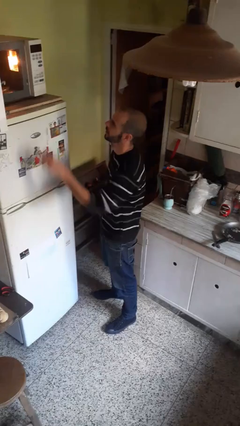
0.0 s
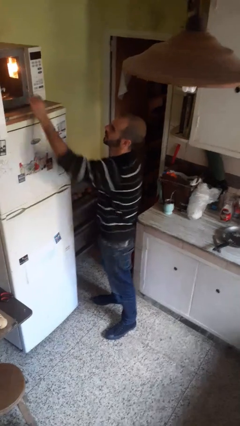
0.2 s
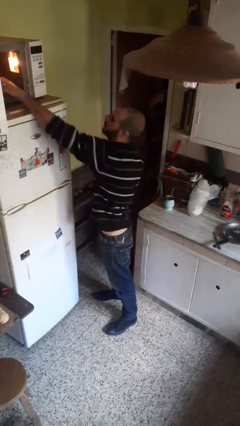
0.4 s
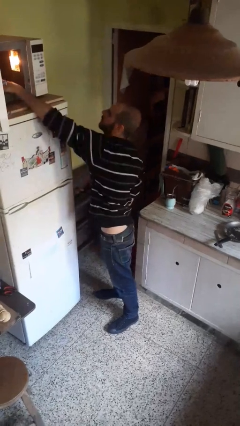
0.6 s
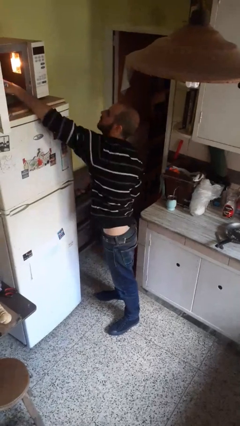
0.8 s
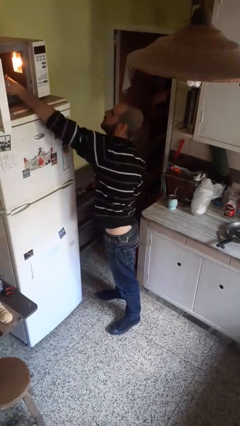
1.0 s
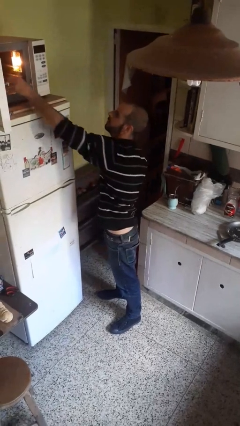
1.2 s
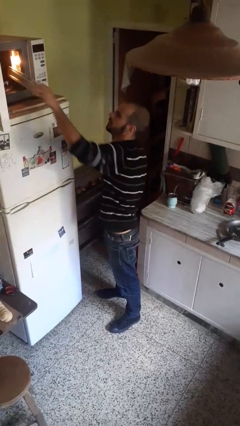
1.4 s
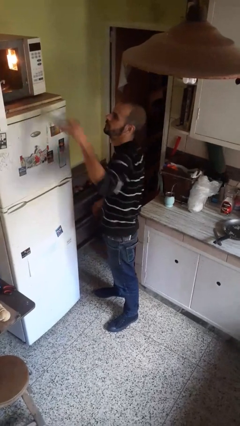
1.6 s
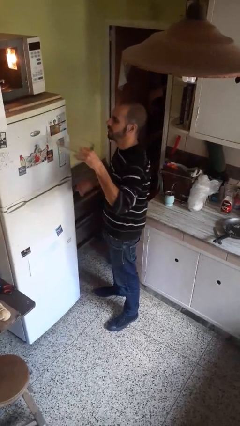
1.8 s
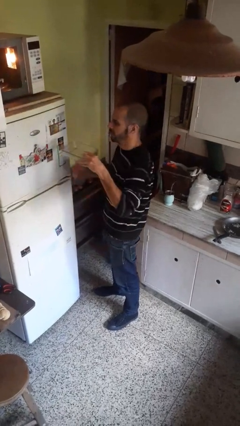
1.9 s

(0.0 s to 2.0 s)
person takes object from microwave

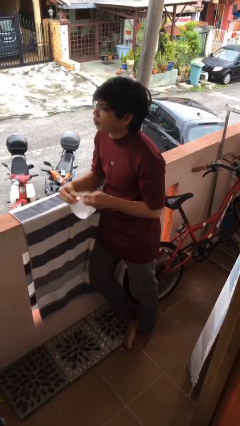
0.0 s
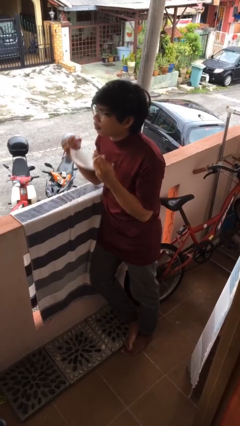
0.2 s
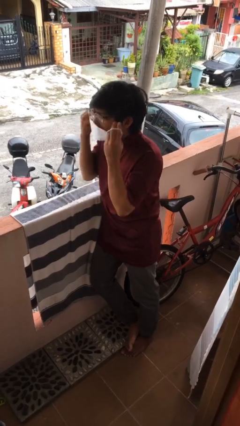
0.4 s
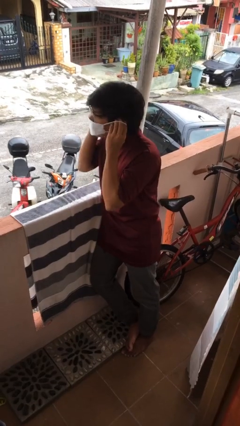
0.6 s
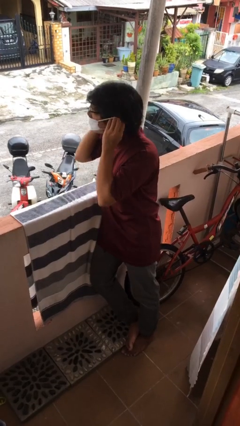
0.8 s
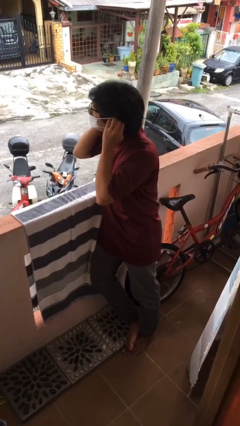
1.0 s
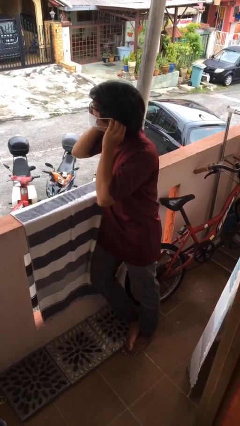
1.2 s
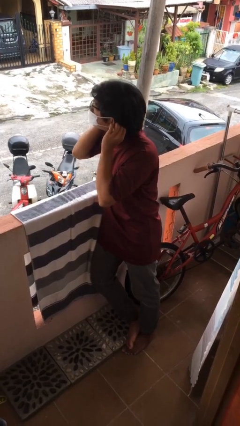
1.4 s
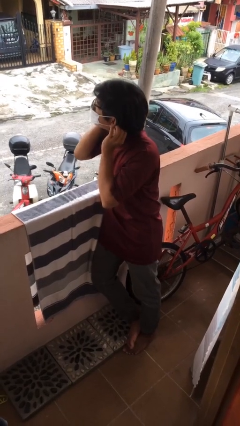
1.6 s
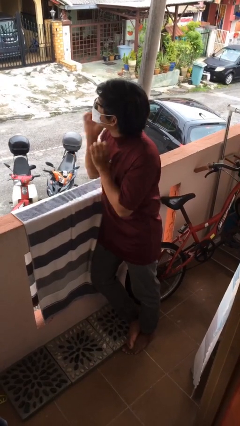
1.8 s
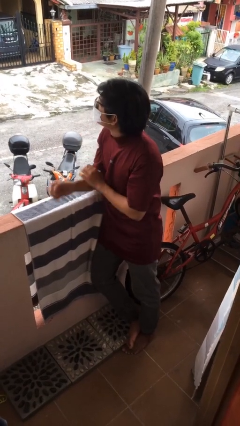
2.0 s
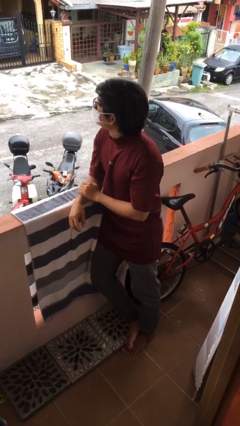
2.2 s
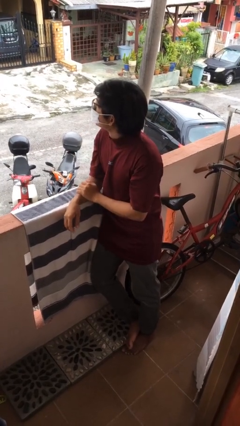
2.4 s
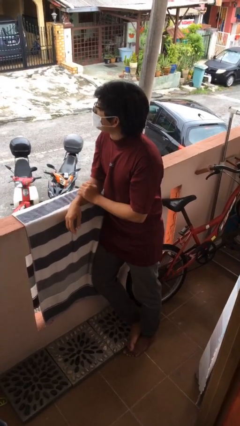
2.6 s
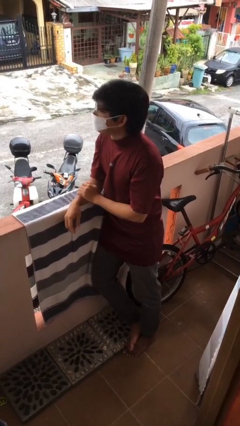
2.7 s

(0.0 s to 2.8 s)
person puts on facemask

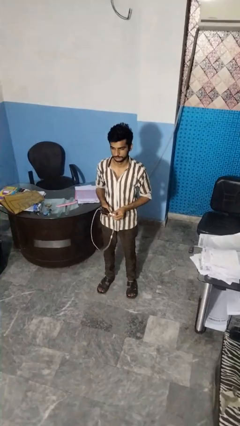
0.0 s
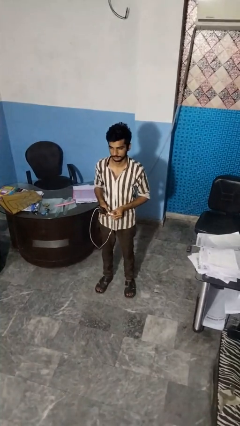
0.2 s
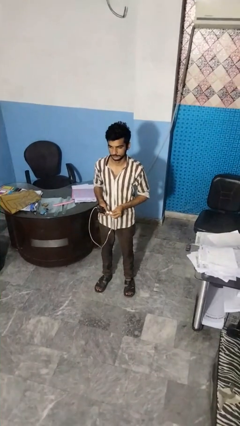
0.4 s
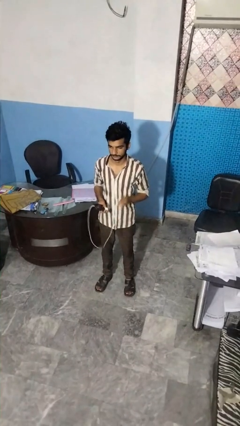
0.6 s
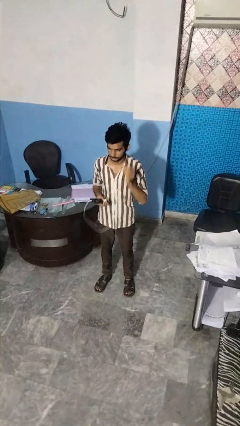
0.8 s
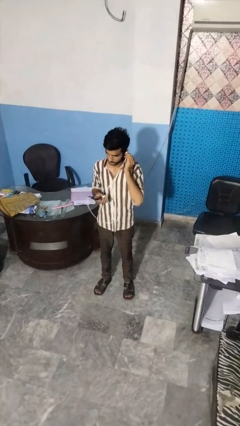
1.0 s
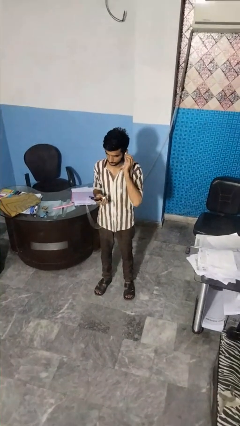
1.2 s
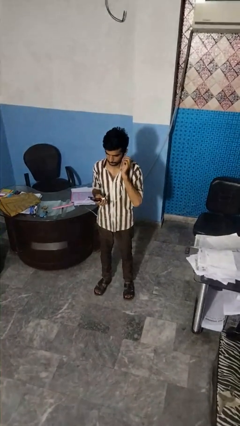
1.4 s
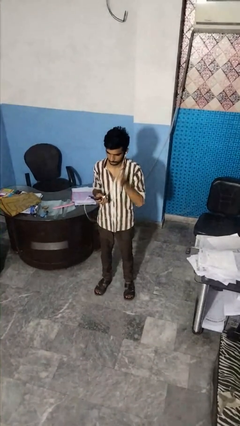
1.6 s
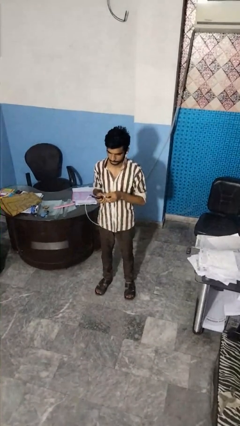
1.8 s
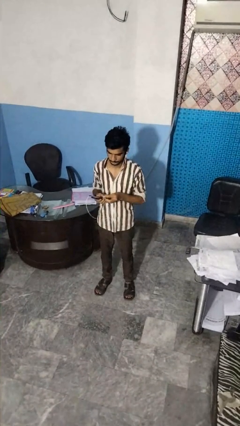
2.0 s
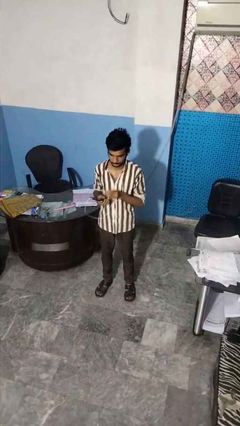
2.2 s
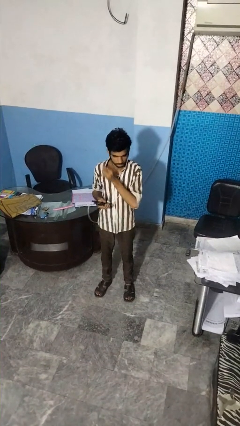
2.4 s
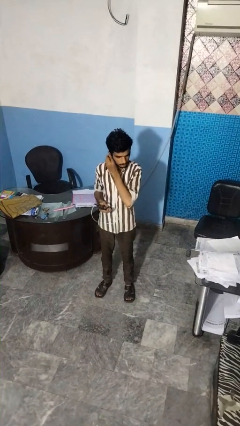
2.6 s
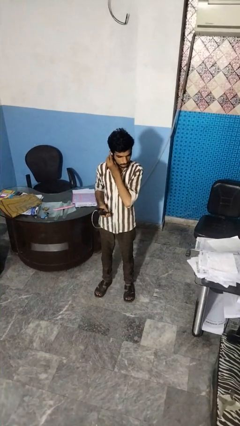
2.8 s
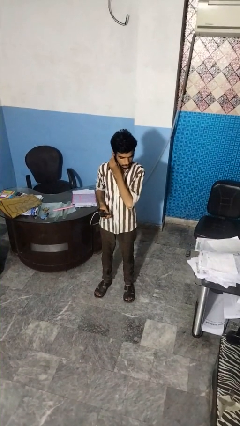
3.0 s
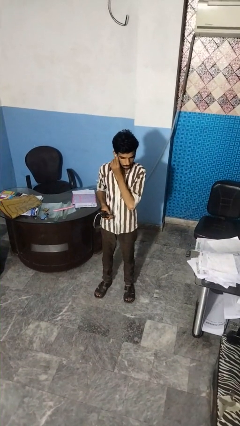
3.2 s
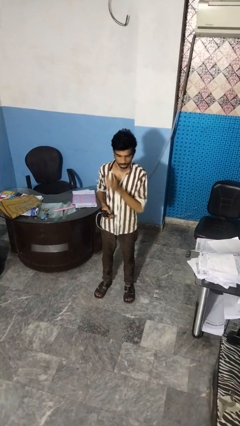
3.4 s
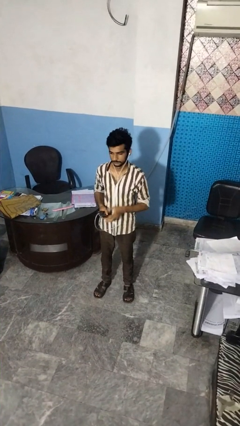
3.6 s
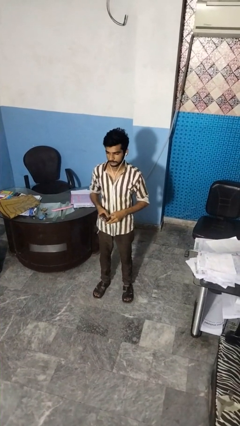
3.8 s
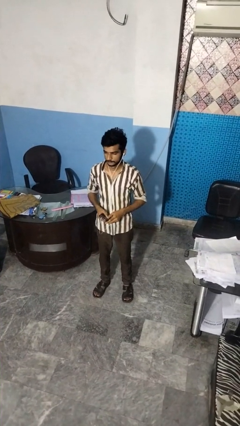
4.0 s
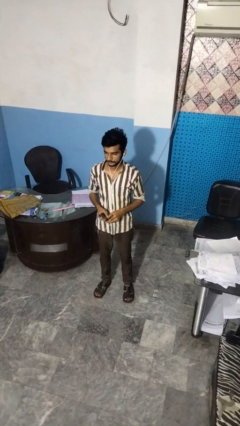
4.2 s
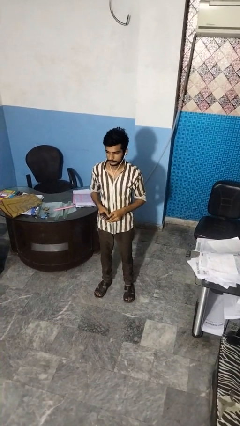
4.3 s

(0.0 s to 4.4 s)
person puts on headphones

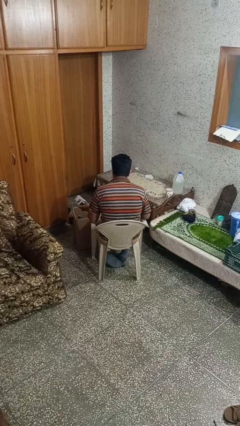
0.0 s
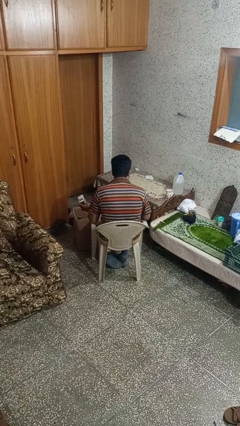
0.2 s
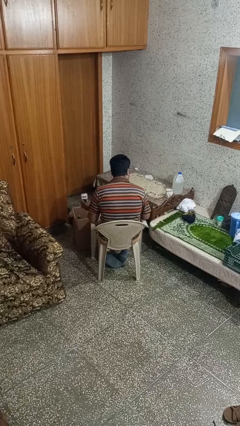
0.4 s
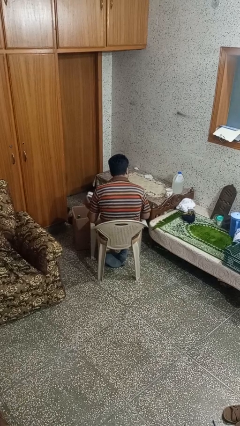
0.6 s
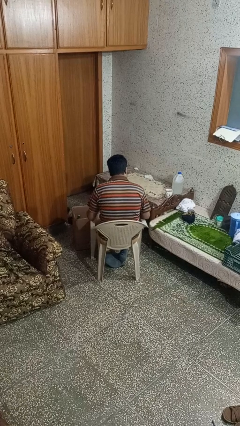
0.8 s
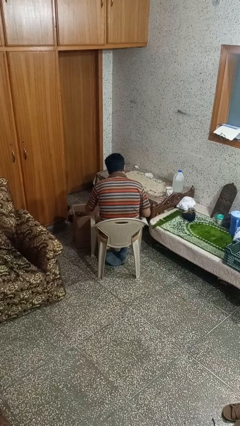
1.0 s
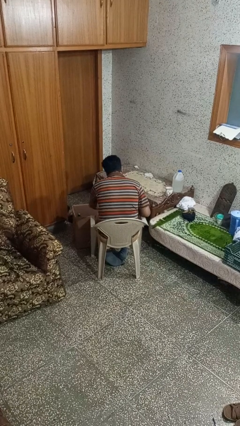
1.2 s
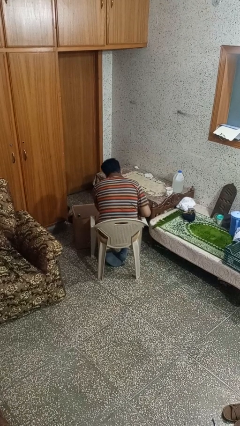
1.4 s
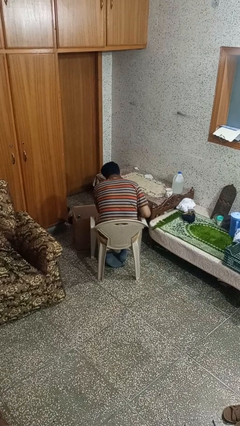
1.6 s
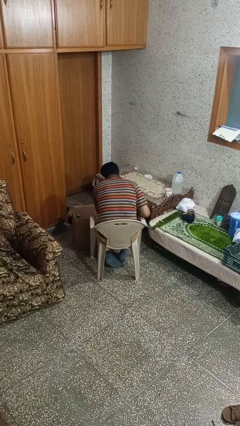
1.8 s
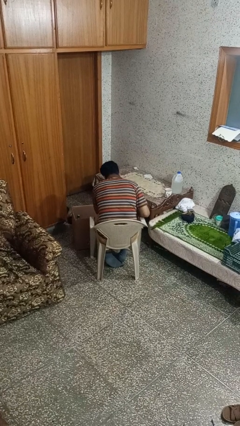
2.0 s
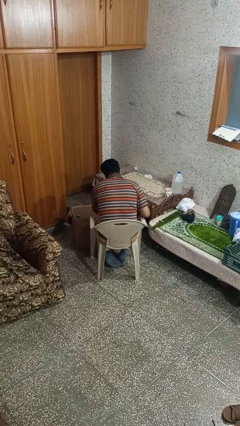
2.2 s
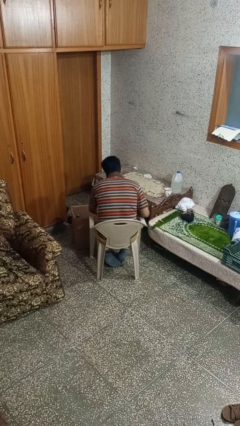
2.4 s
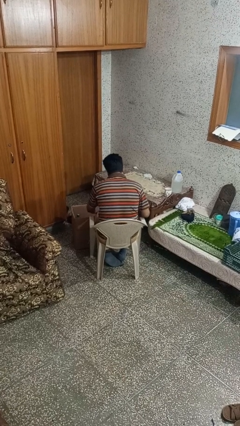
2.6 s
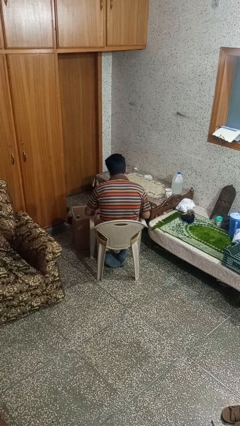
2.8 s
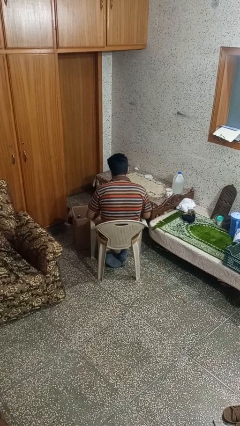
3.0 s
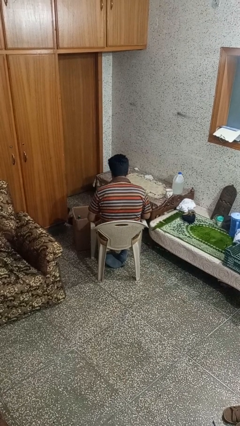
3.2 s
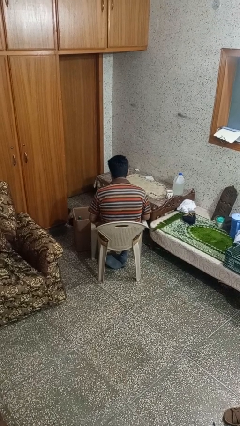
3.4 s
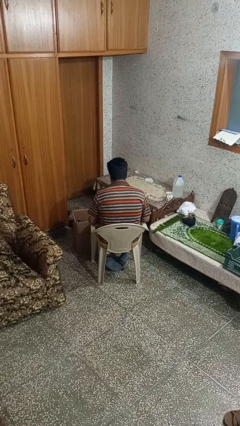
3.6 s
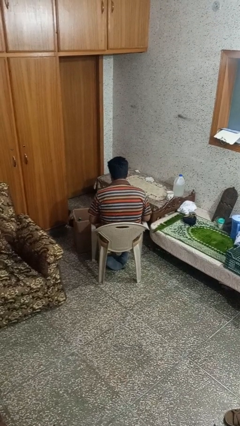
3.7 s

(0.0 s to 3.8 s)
person puts object into box

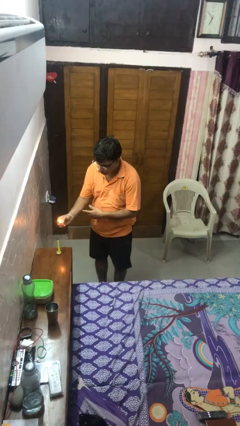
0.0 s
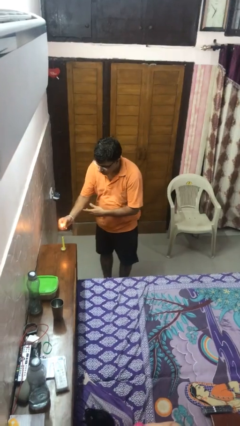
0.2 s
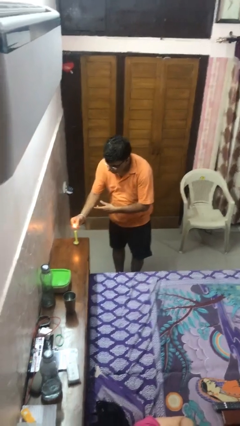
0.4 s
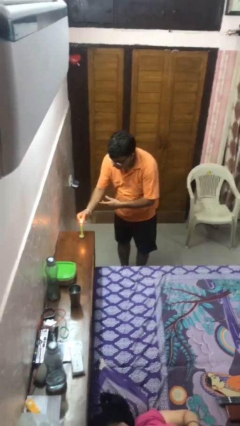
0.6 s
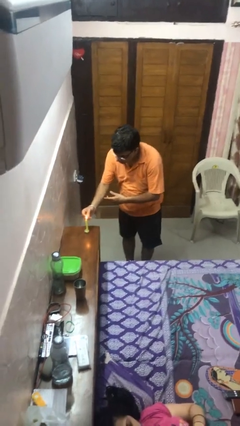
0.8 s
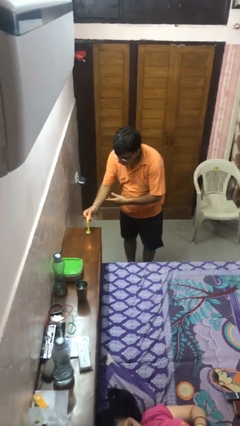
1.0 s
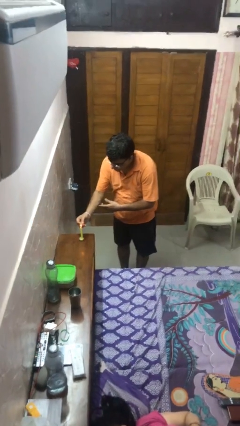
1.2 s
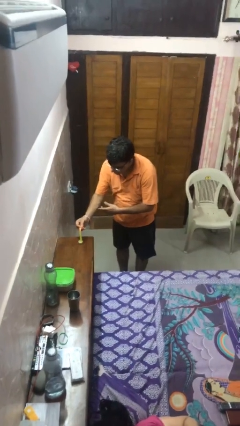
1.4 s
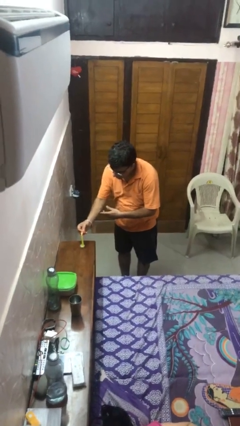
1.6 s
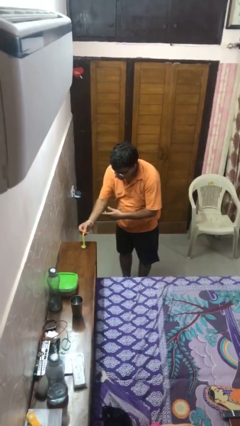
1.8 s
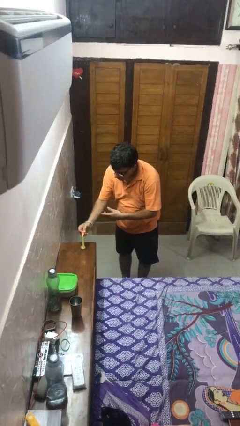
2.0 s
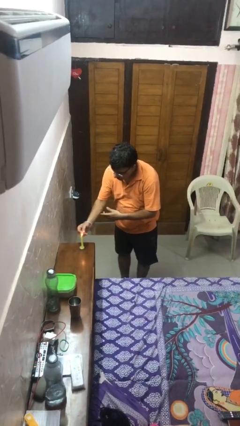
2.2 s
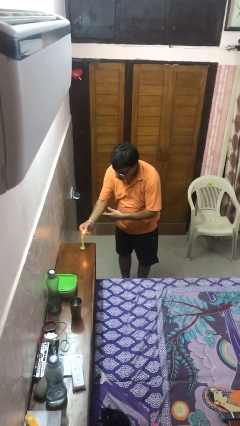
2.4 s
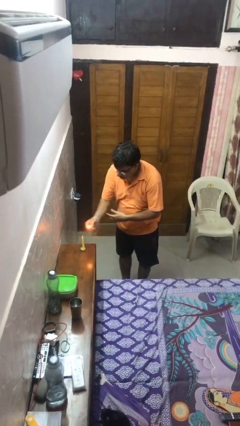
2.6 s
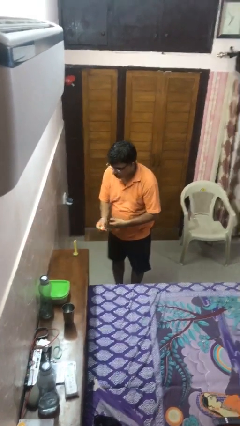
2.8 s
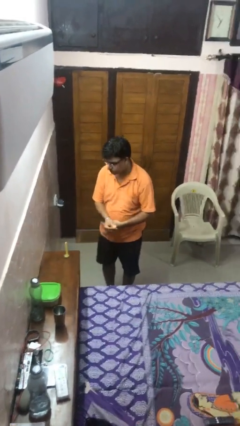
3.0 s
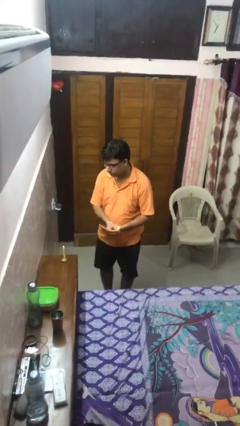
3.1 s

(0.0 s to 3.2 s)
person lights candle

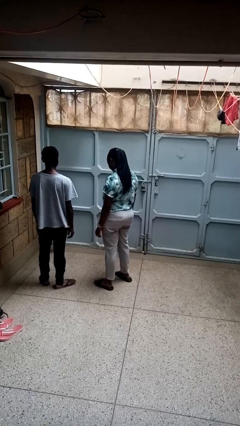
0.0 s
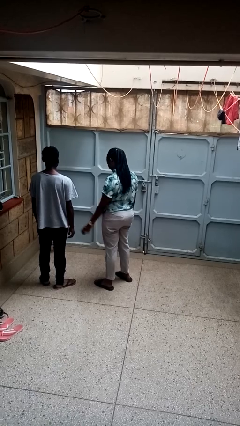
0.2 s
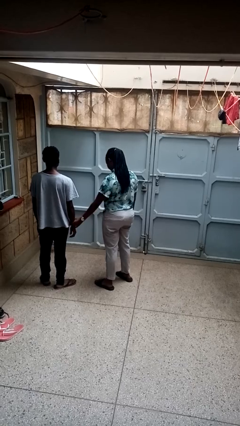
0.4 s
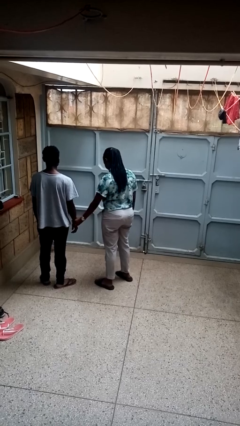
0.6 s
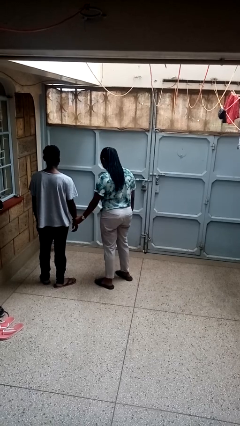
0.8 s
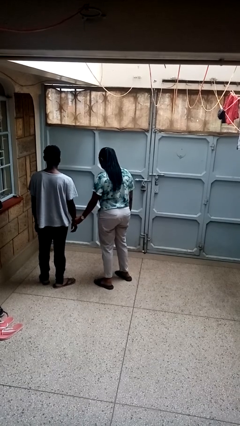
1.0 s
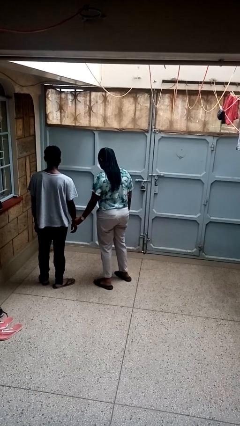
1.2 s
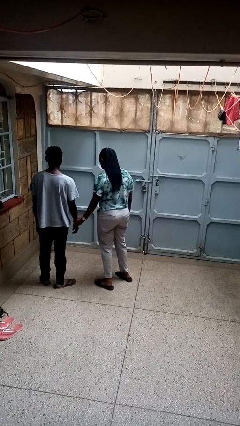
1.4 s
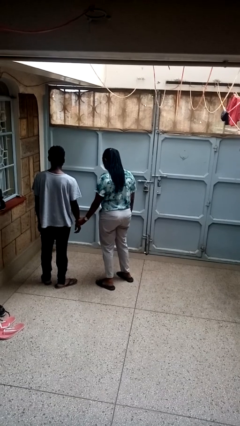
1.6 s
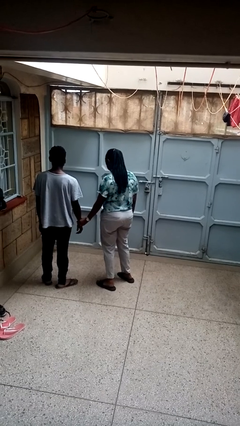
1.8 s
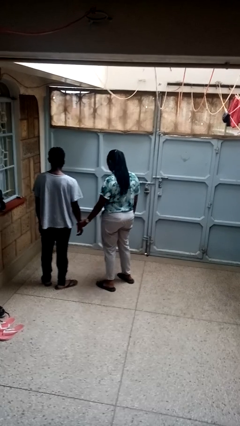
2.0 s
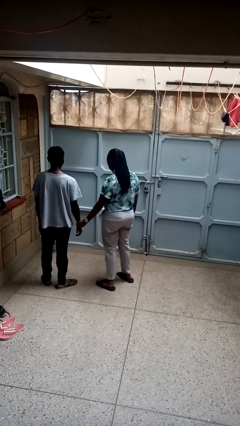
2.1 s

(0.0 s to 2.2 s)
person grabs person by forearm
